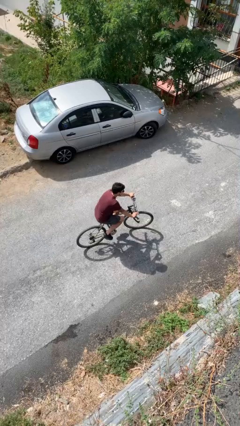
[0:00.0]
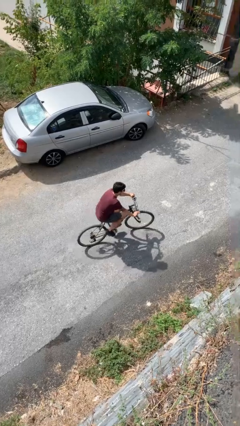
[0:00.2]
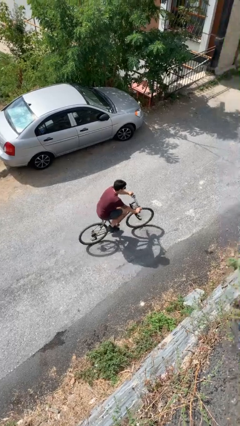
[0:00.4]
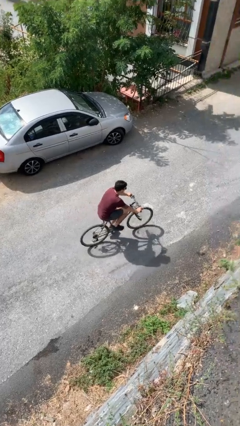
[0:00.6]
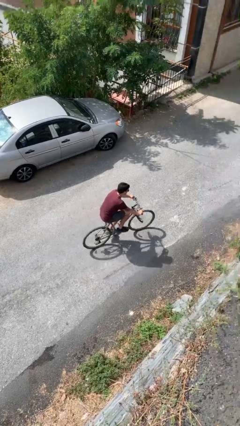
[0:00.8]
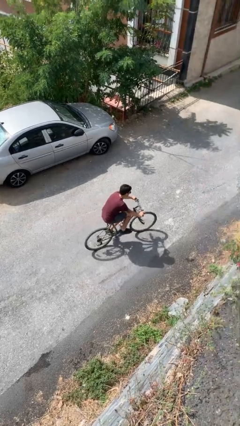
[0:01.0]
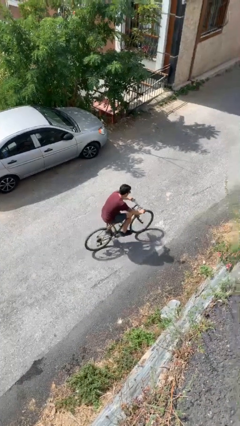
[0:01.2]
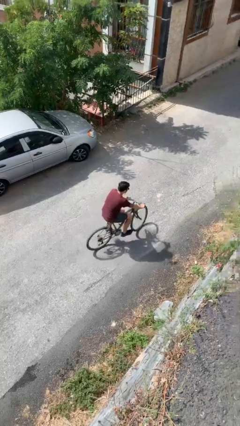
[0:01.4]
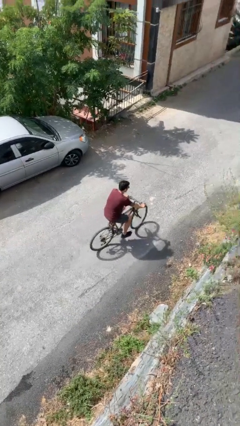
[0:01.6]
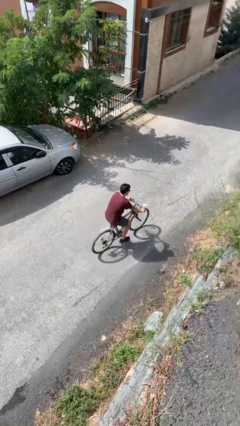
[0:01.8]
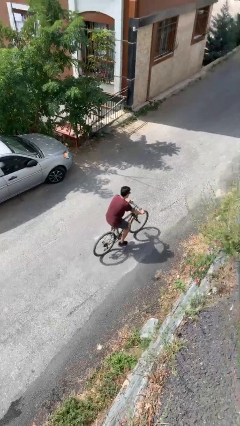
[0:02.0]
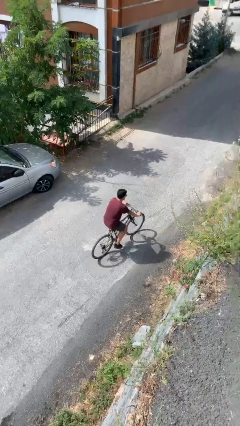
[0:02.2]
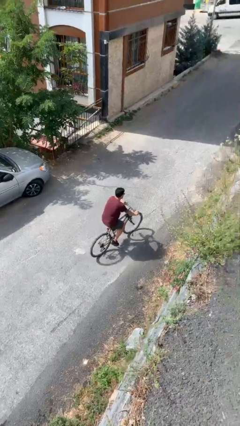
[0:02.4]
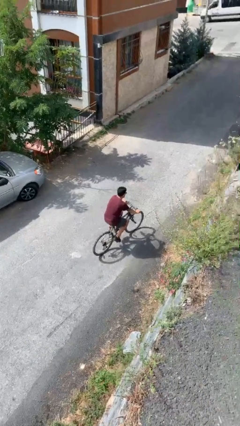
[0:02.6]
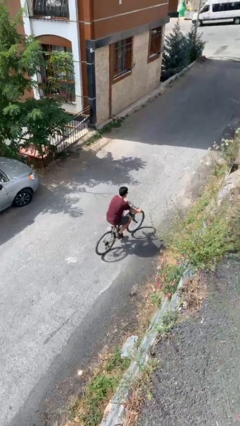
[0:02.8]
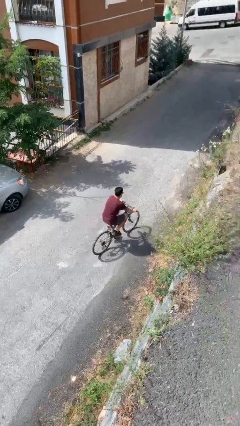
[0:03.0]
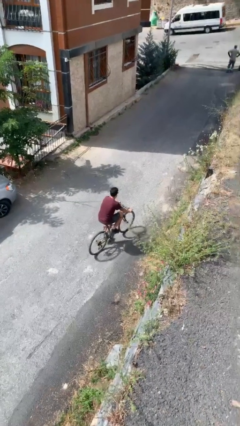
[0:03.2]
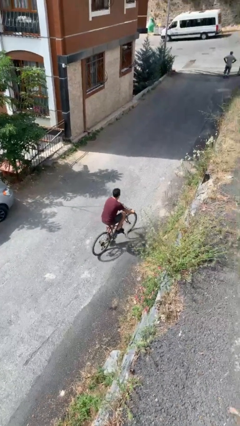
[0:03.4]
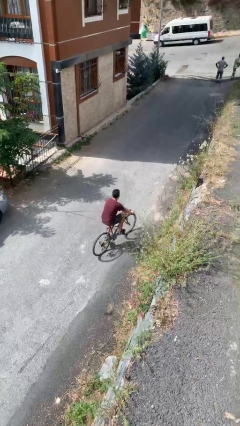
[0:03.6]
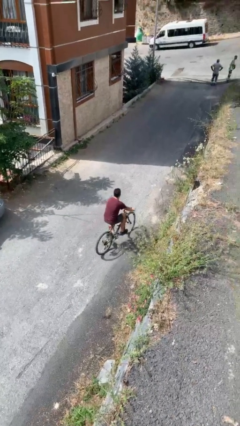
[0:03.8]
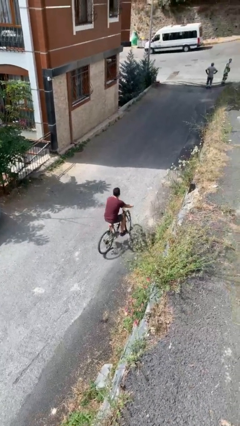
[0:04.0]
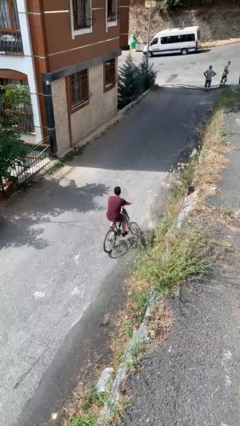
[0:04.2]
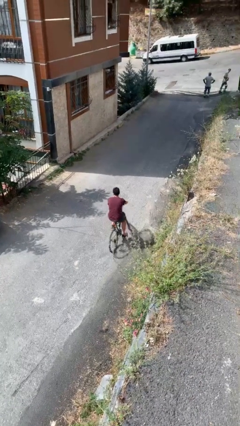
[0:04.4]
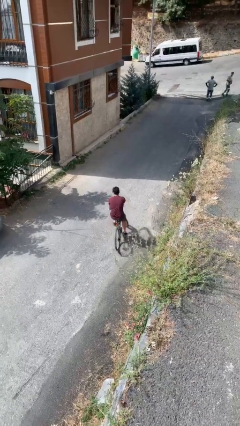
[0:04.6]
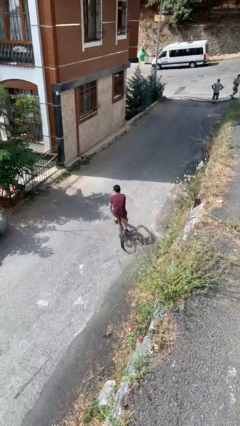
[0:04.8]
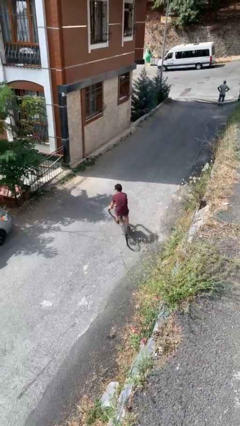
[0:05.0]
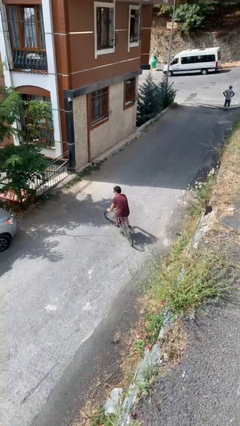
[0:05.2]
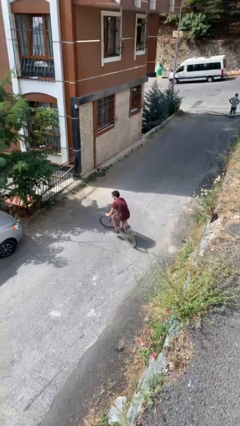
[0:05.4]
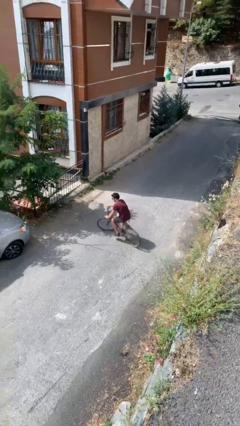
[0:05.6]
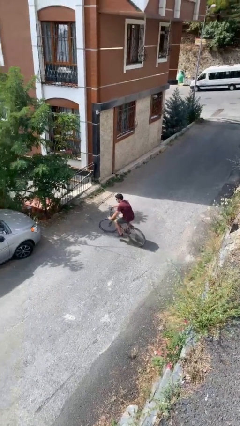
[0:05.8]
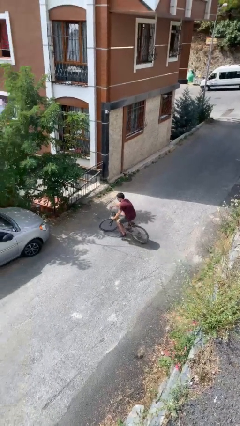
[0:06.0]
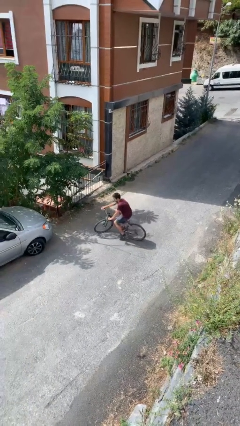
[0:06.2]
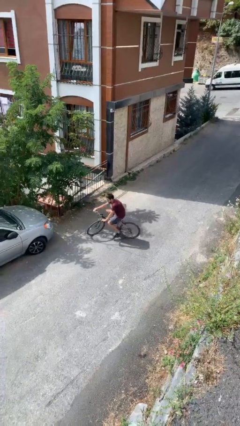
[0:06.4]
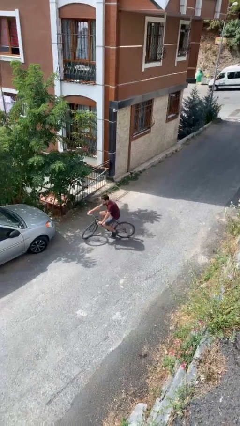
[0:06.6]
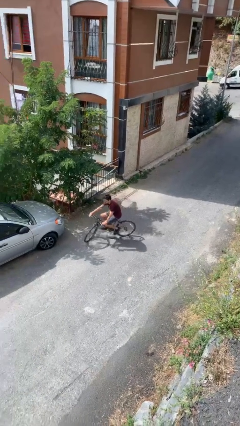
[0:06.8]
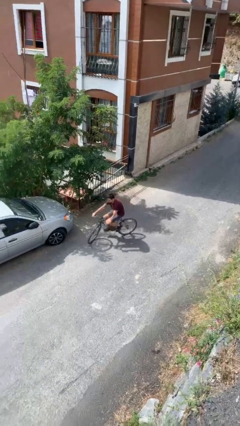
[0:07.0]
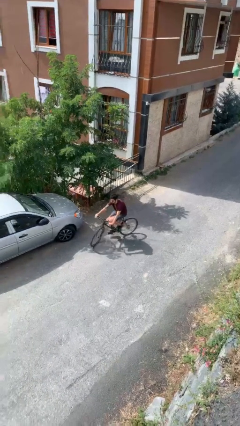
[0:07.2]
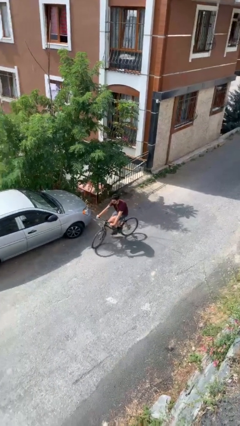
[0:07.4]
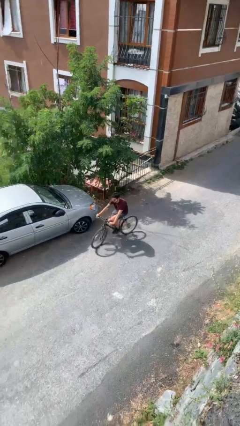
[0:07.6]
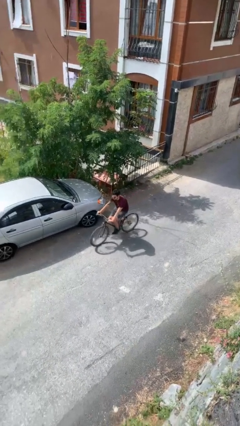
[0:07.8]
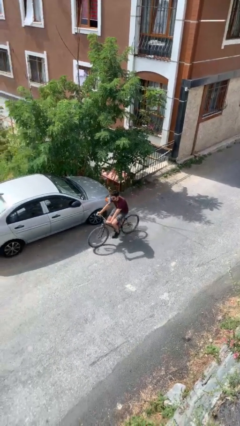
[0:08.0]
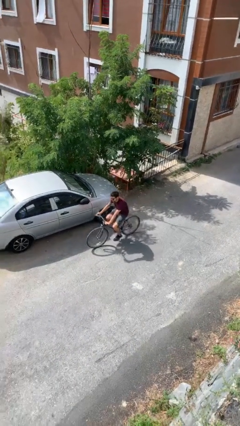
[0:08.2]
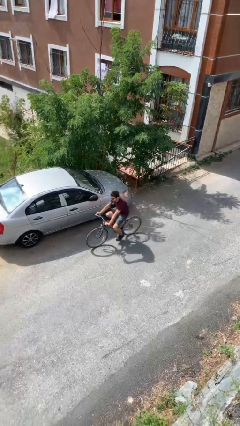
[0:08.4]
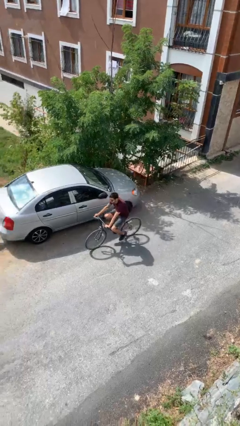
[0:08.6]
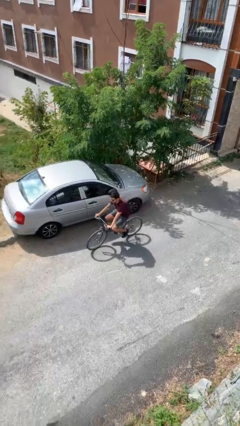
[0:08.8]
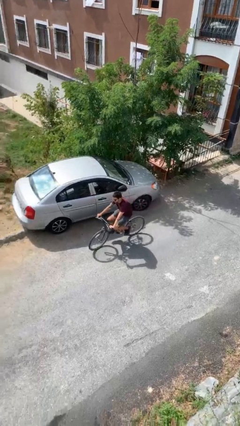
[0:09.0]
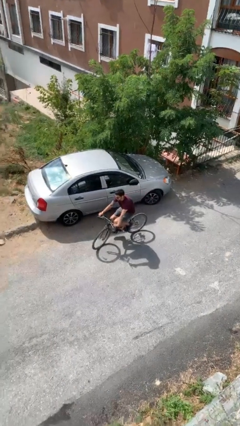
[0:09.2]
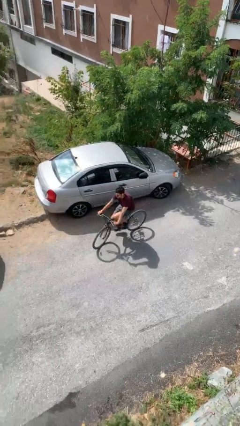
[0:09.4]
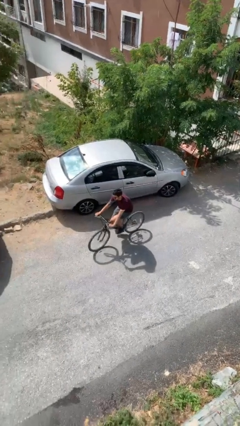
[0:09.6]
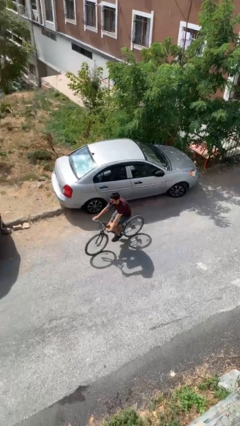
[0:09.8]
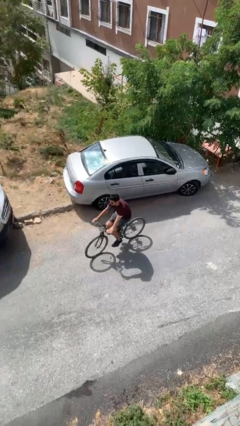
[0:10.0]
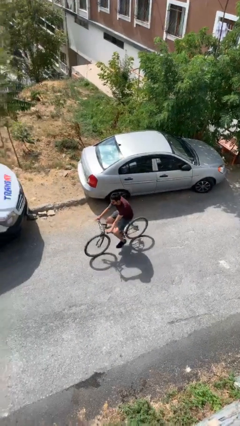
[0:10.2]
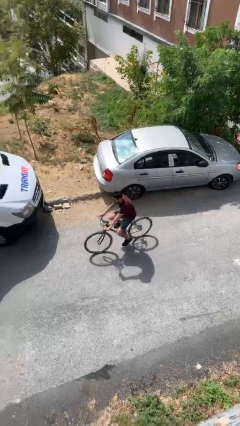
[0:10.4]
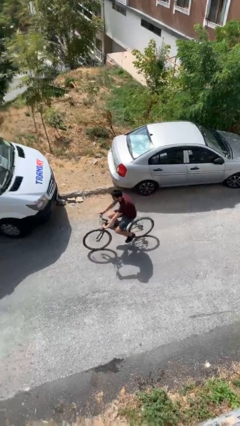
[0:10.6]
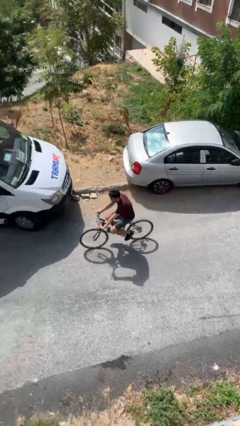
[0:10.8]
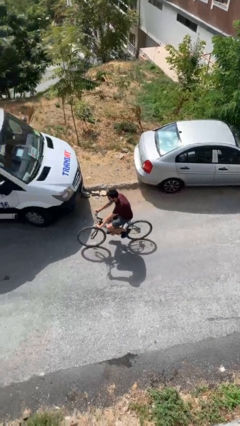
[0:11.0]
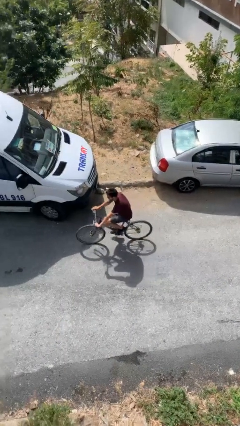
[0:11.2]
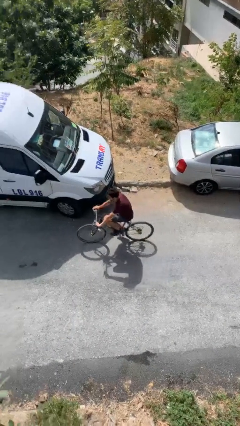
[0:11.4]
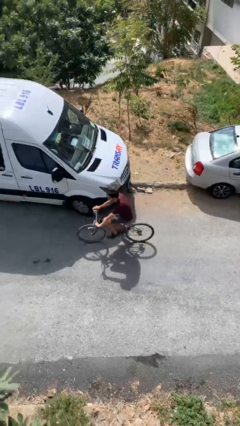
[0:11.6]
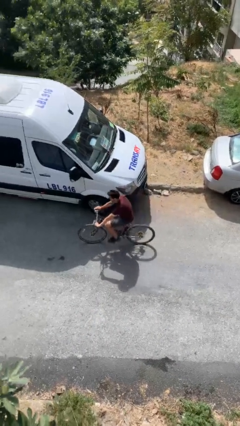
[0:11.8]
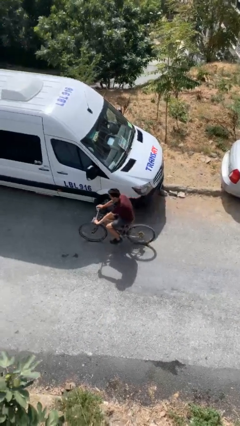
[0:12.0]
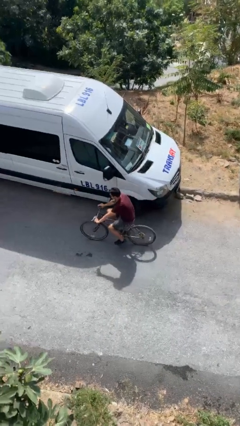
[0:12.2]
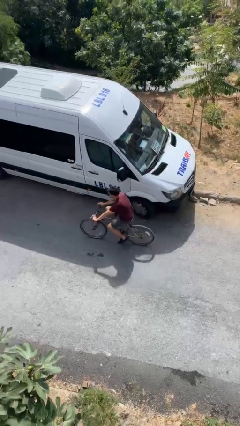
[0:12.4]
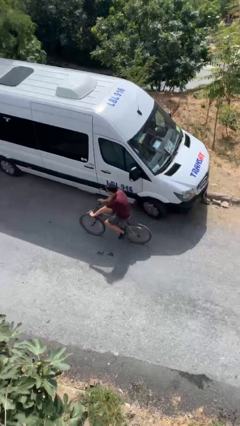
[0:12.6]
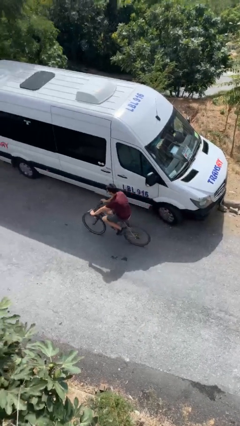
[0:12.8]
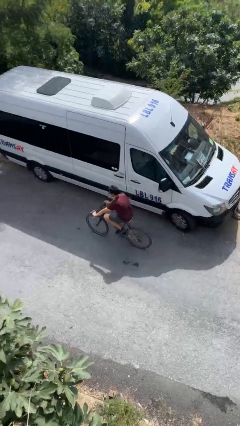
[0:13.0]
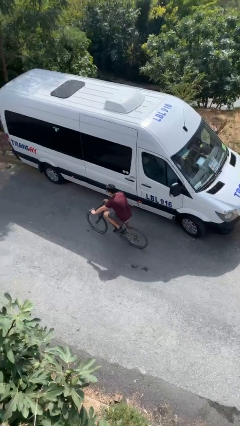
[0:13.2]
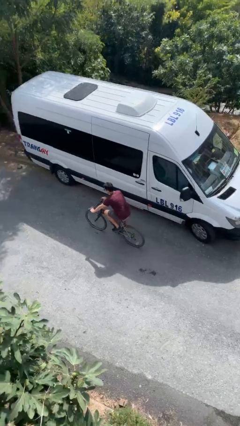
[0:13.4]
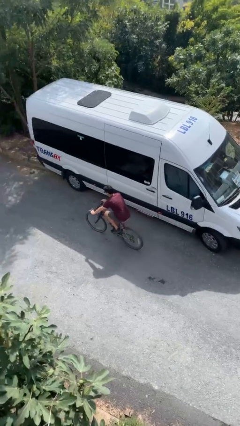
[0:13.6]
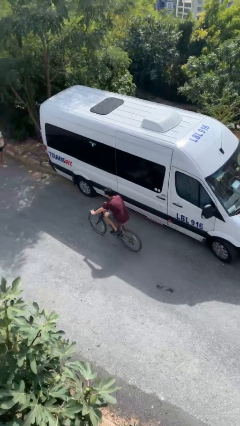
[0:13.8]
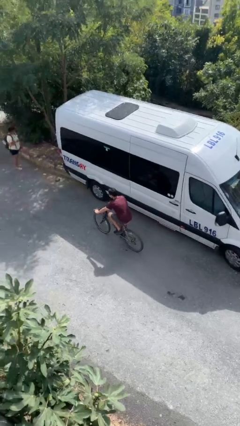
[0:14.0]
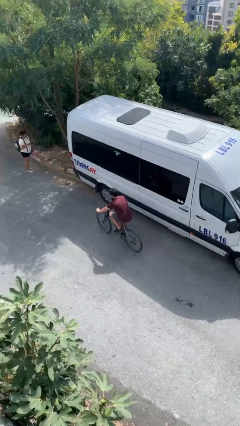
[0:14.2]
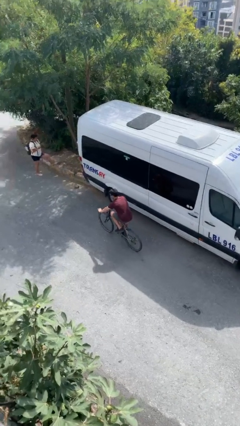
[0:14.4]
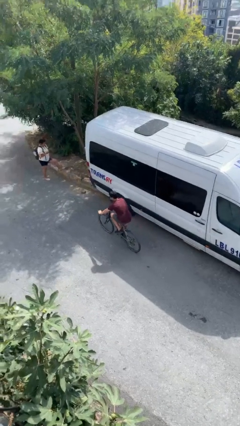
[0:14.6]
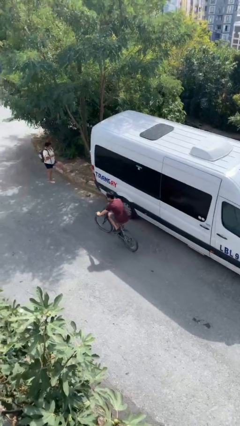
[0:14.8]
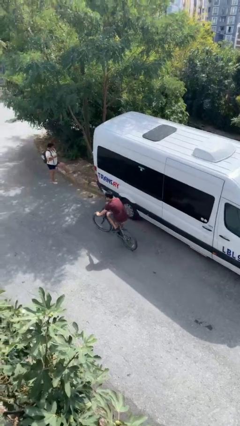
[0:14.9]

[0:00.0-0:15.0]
person rides bicycle

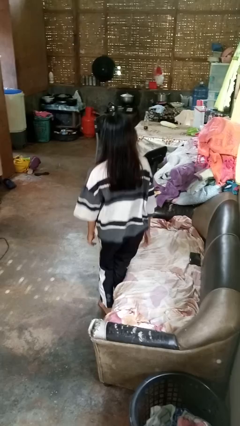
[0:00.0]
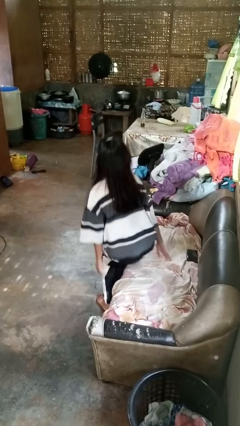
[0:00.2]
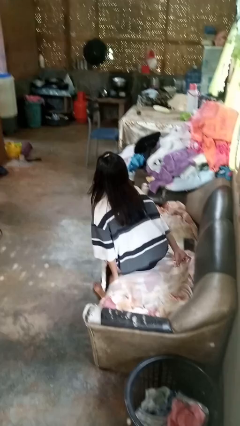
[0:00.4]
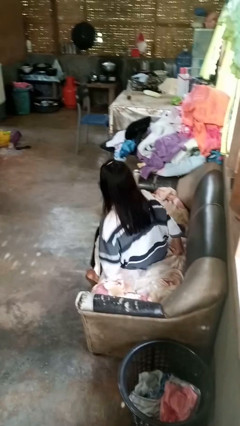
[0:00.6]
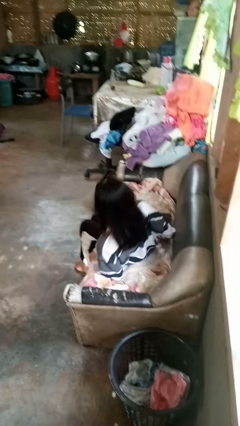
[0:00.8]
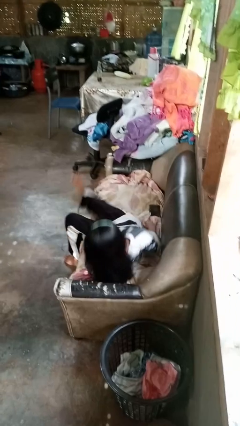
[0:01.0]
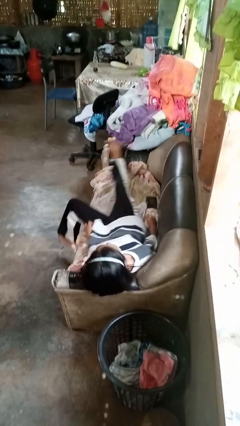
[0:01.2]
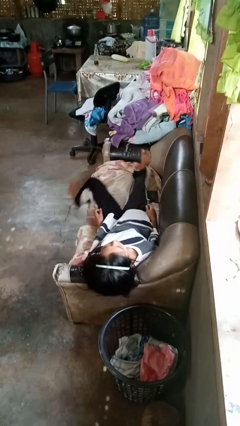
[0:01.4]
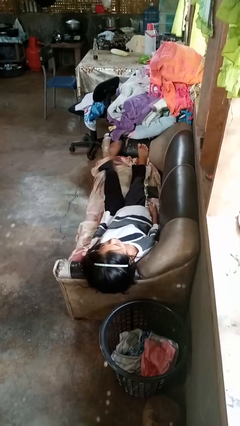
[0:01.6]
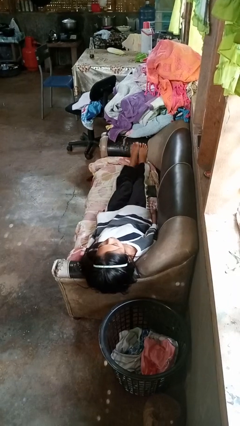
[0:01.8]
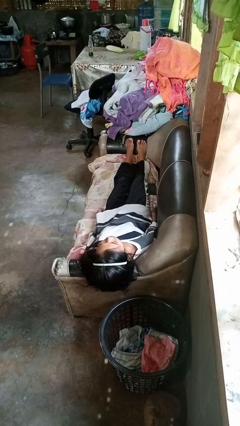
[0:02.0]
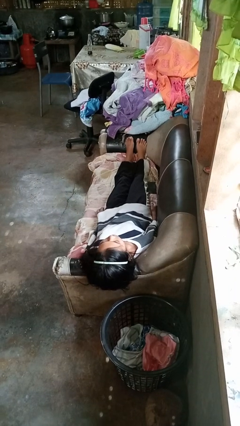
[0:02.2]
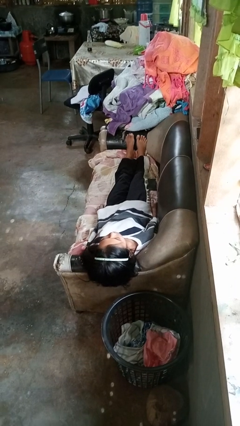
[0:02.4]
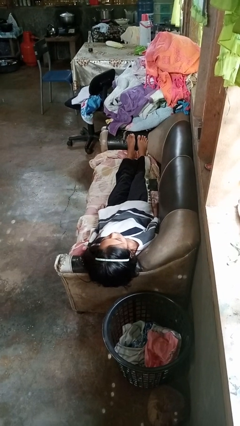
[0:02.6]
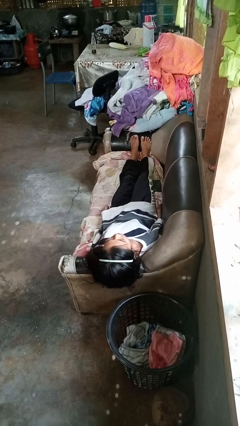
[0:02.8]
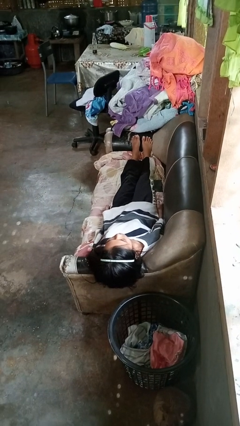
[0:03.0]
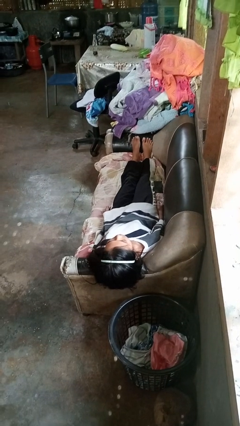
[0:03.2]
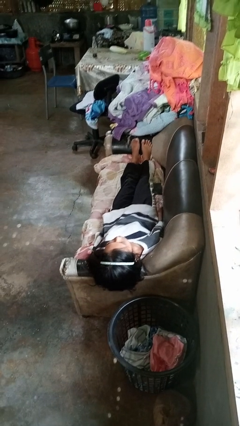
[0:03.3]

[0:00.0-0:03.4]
person lies down on couch
